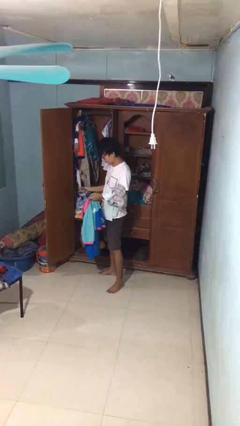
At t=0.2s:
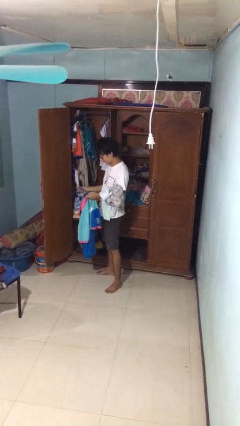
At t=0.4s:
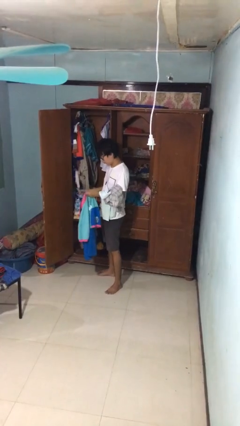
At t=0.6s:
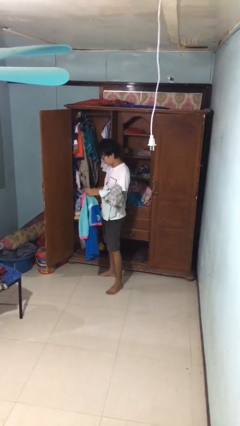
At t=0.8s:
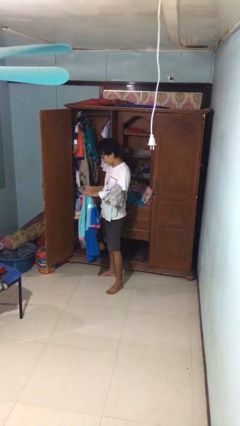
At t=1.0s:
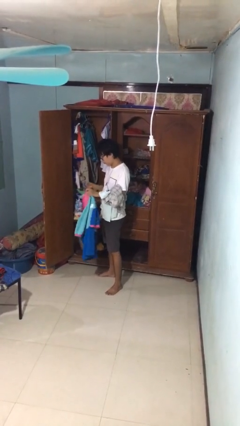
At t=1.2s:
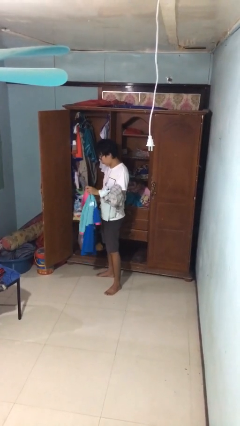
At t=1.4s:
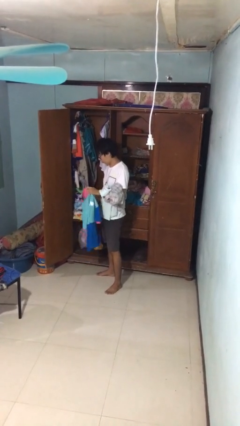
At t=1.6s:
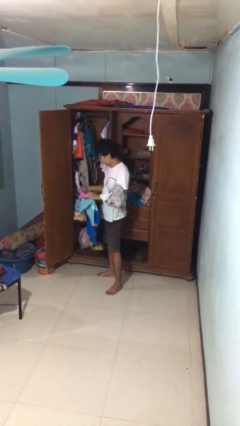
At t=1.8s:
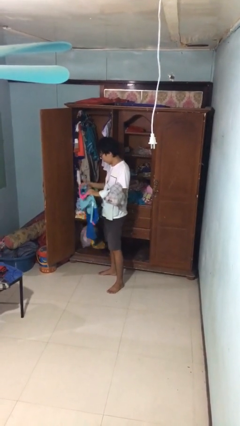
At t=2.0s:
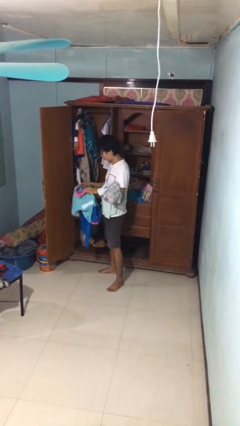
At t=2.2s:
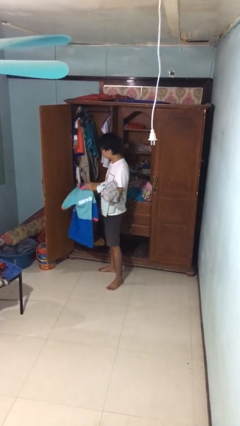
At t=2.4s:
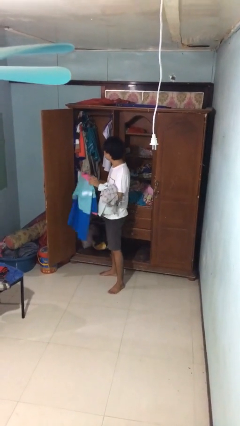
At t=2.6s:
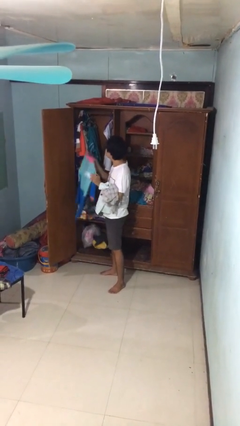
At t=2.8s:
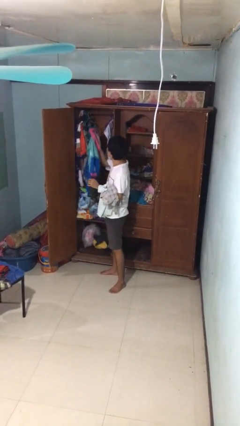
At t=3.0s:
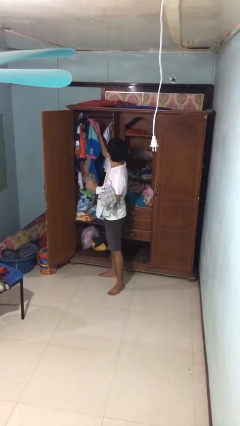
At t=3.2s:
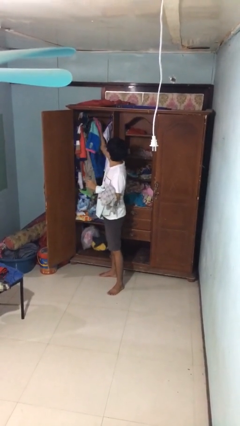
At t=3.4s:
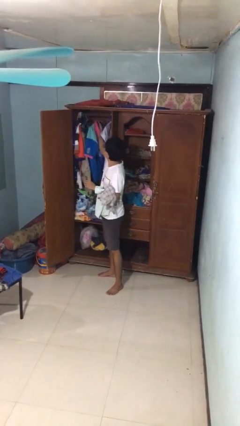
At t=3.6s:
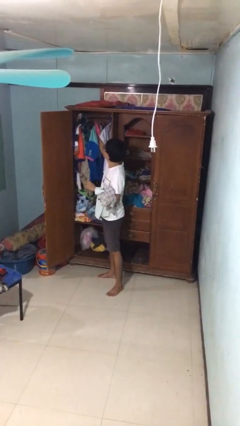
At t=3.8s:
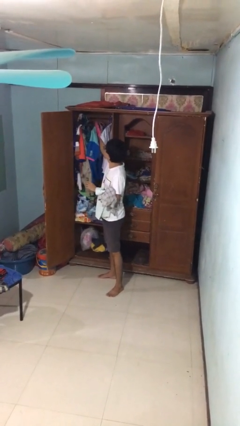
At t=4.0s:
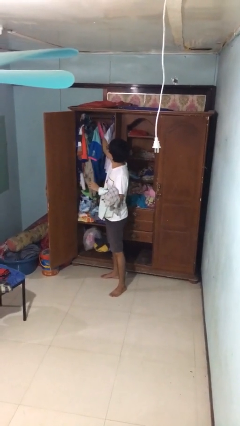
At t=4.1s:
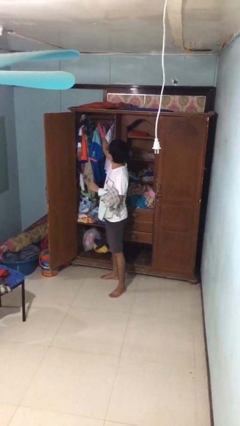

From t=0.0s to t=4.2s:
person puts clothes into closet

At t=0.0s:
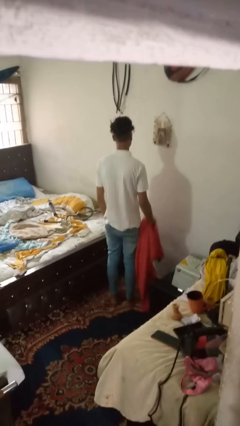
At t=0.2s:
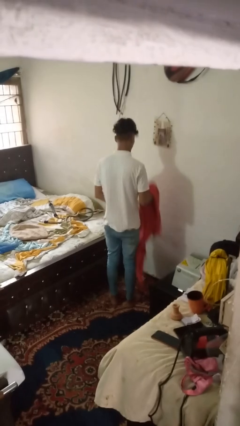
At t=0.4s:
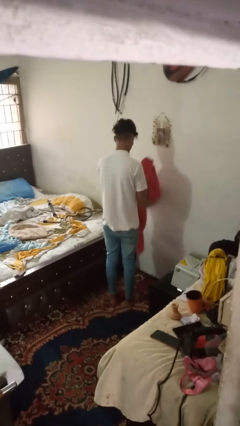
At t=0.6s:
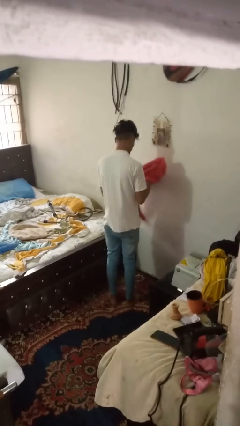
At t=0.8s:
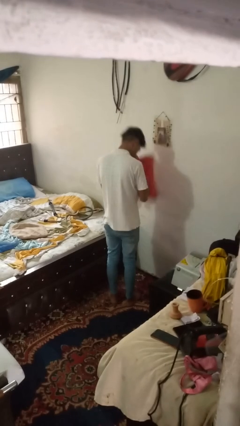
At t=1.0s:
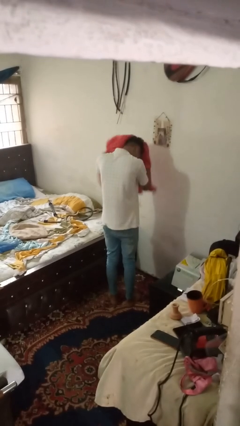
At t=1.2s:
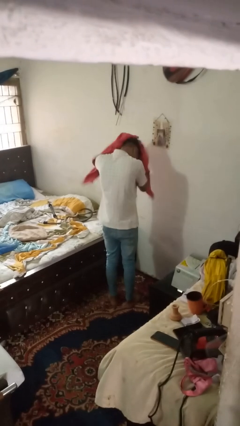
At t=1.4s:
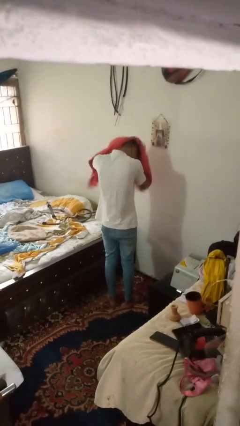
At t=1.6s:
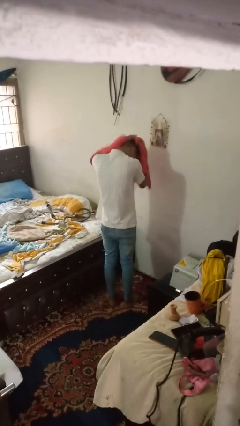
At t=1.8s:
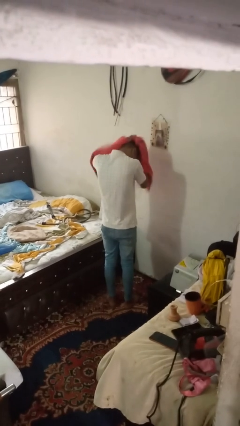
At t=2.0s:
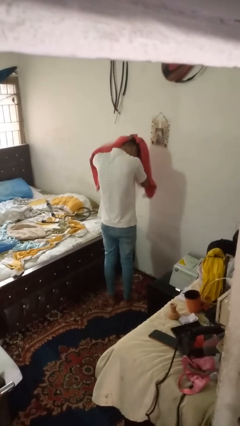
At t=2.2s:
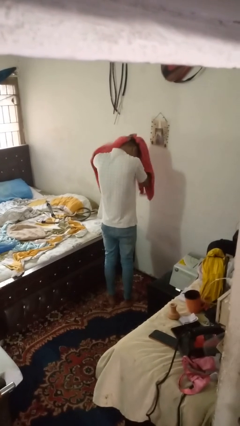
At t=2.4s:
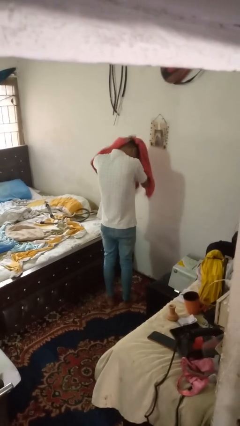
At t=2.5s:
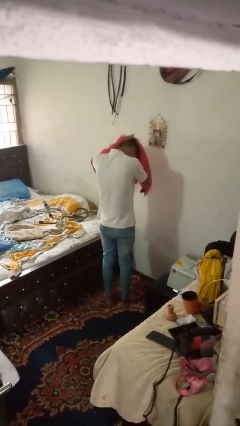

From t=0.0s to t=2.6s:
person dries hair with towel

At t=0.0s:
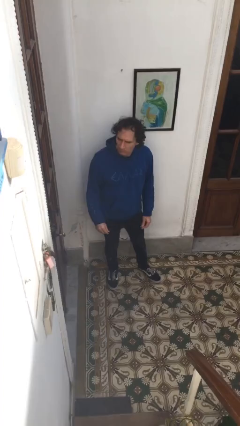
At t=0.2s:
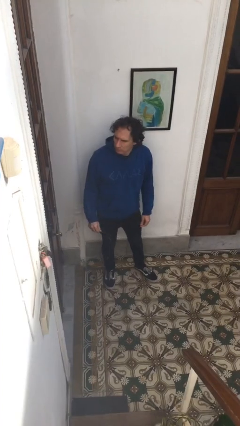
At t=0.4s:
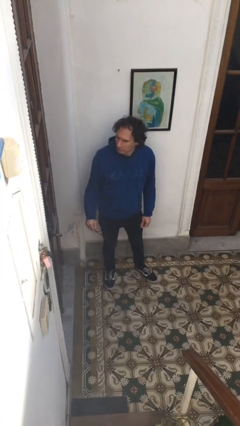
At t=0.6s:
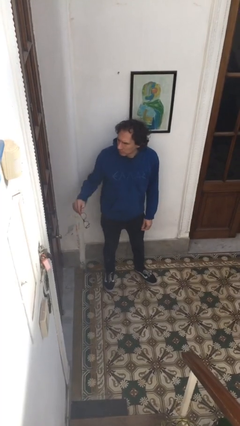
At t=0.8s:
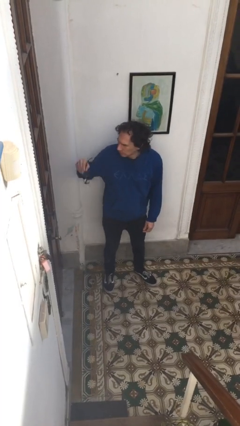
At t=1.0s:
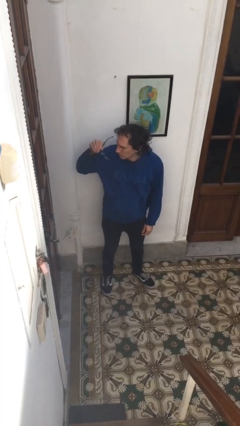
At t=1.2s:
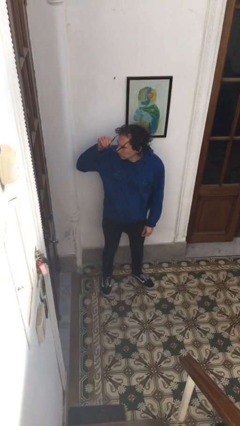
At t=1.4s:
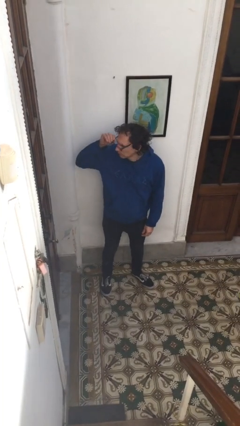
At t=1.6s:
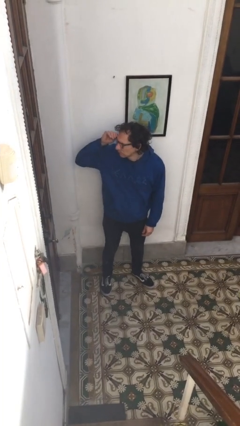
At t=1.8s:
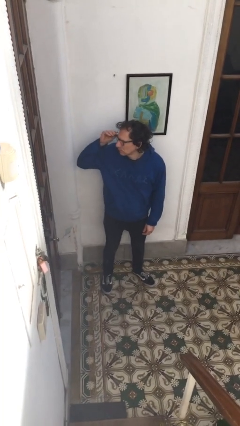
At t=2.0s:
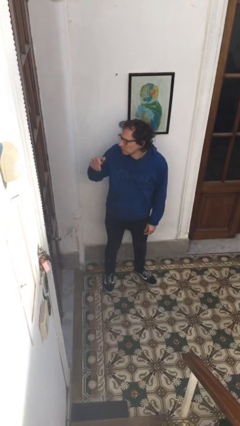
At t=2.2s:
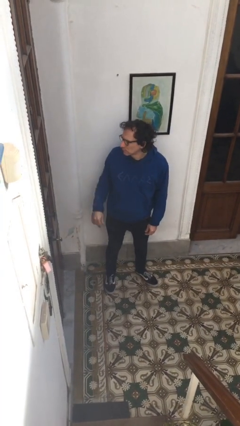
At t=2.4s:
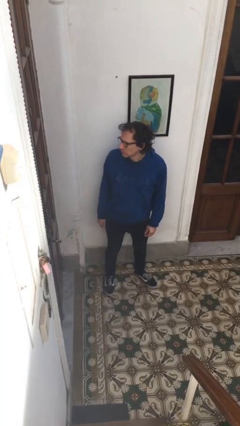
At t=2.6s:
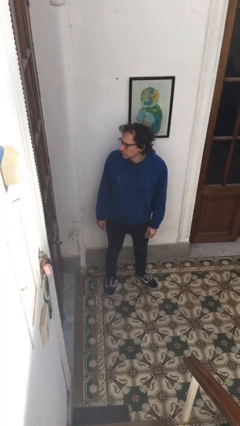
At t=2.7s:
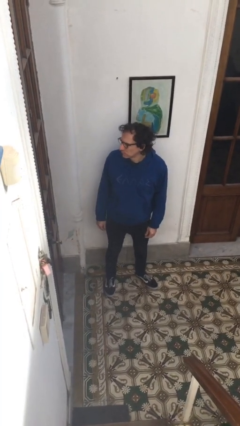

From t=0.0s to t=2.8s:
person puts on glasses

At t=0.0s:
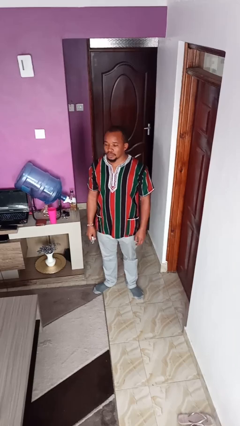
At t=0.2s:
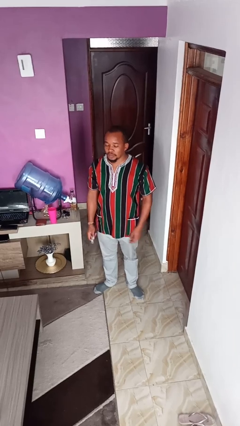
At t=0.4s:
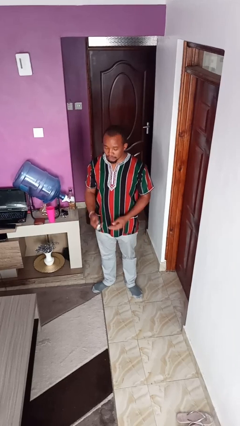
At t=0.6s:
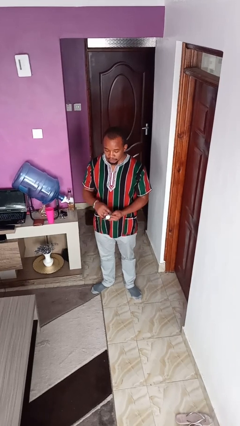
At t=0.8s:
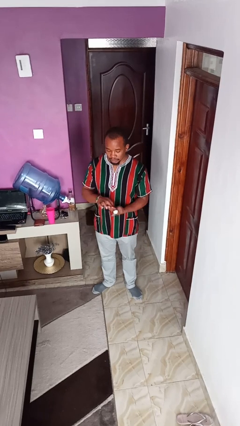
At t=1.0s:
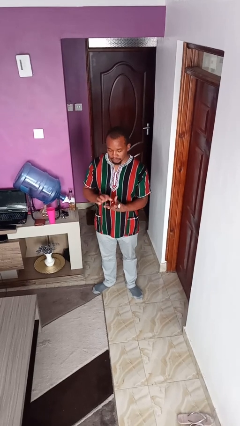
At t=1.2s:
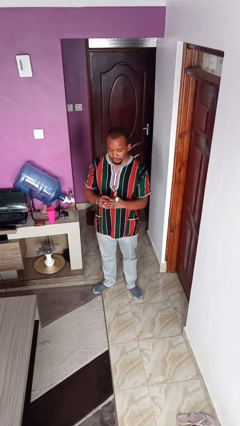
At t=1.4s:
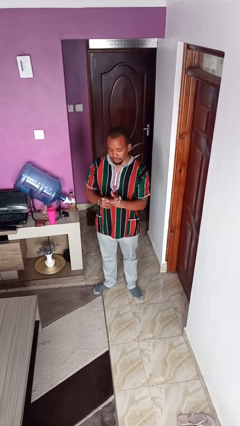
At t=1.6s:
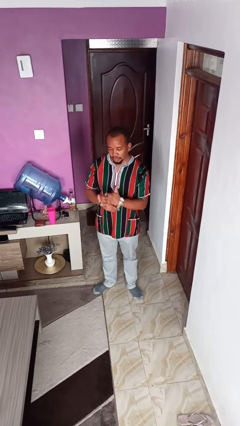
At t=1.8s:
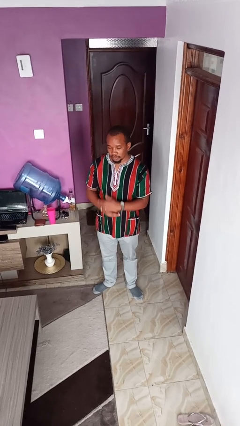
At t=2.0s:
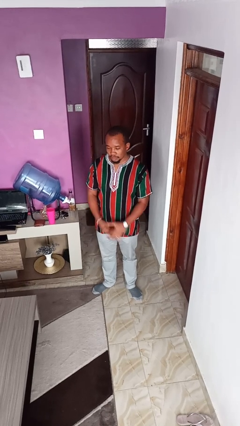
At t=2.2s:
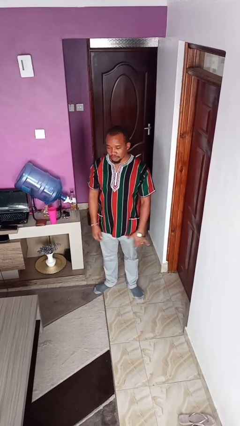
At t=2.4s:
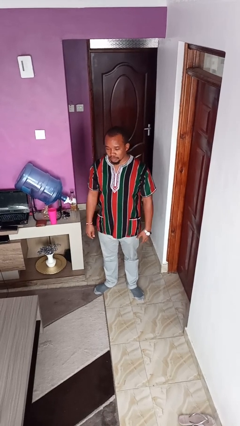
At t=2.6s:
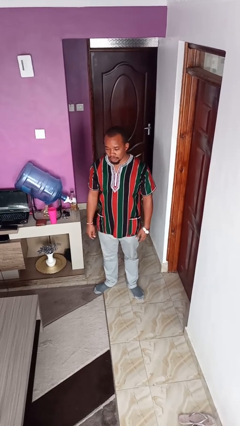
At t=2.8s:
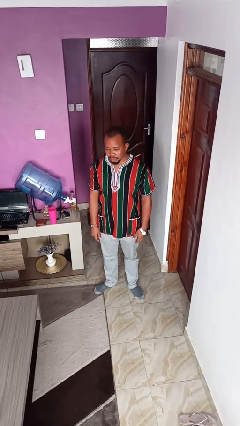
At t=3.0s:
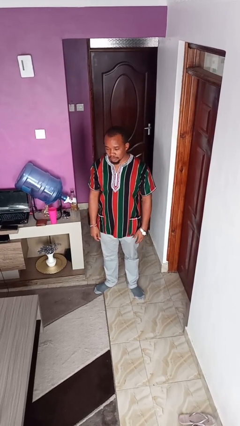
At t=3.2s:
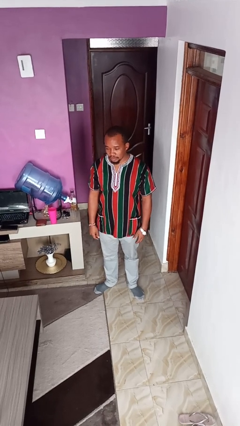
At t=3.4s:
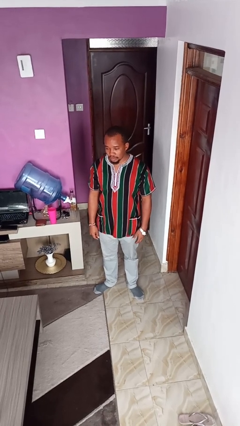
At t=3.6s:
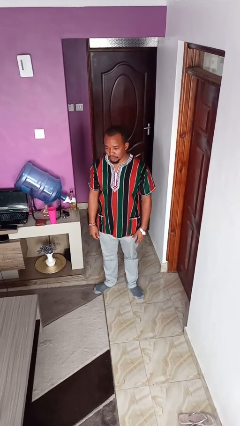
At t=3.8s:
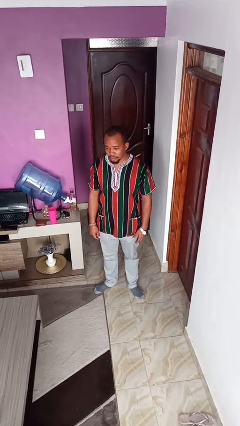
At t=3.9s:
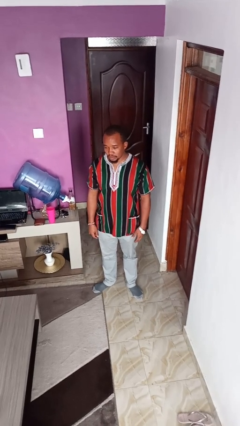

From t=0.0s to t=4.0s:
person puts on wristwatch

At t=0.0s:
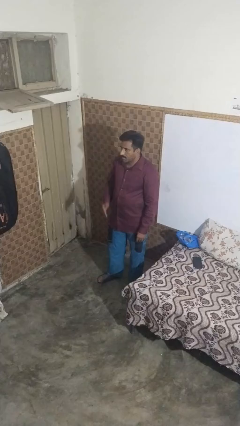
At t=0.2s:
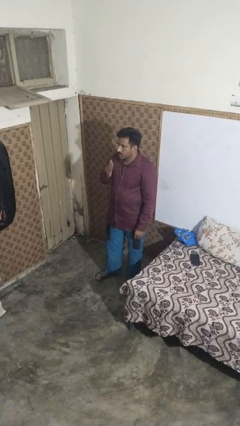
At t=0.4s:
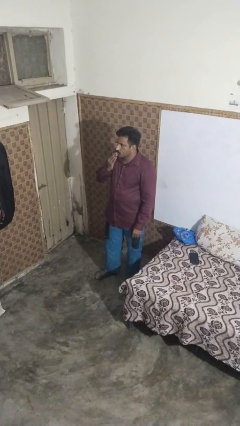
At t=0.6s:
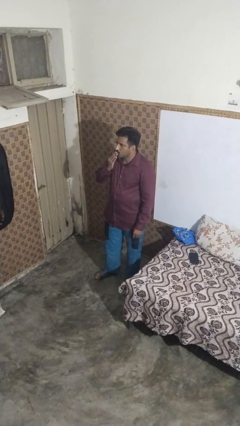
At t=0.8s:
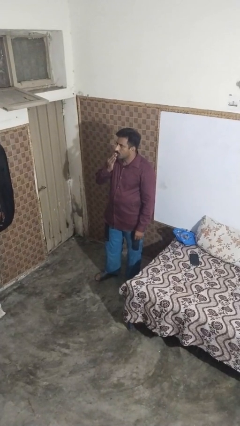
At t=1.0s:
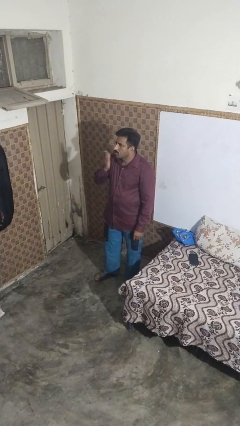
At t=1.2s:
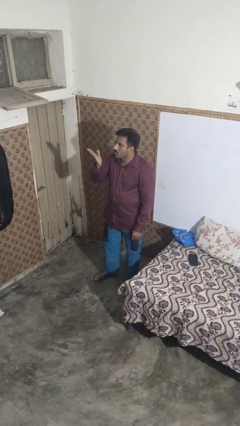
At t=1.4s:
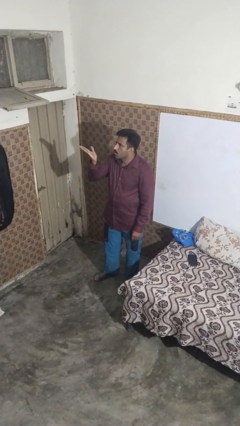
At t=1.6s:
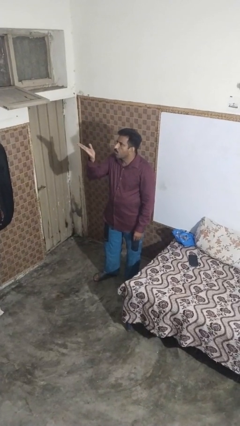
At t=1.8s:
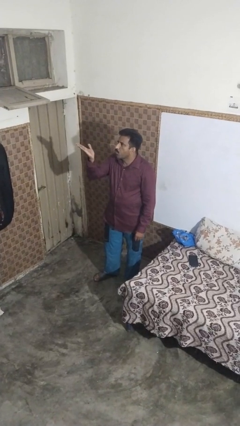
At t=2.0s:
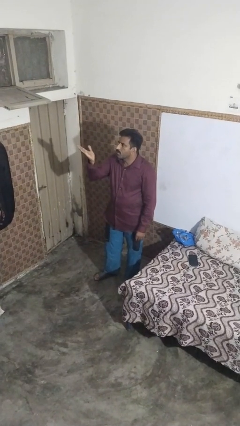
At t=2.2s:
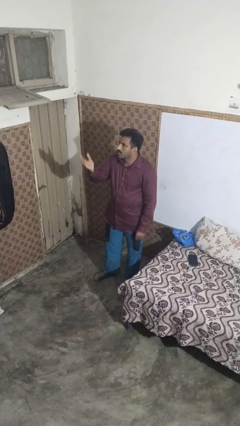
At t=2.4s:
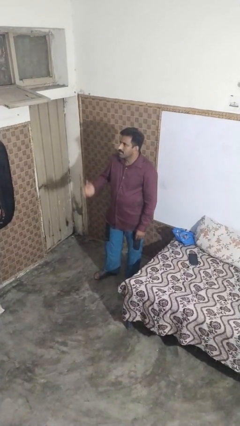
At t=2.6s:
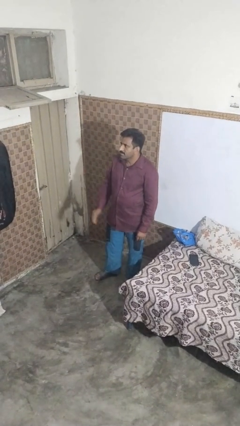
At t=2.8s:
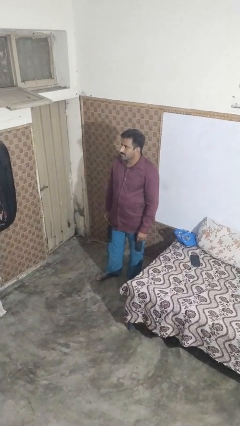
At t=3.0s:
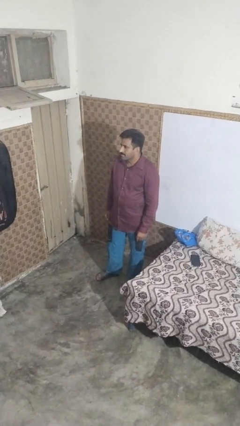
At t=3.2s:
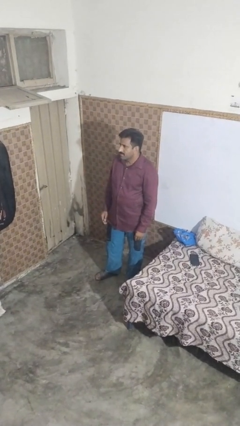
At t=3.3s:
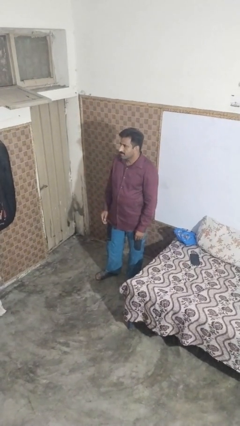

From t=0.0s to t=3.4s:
person gestures blow kiss

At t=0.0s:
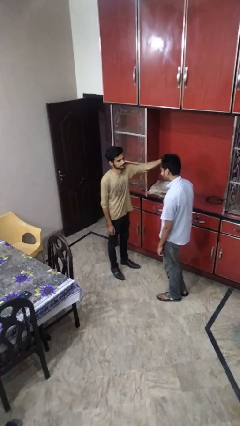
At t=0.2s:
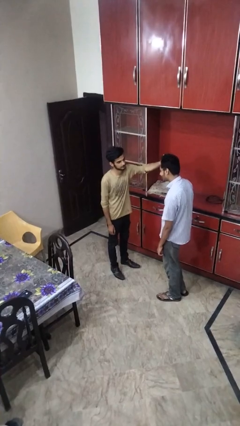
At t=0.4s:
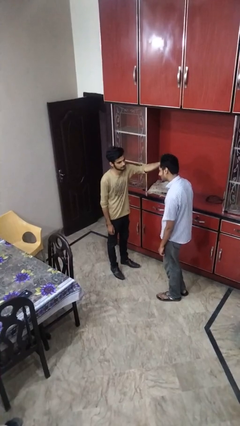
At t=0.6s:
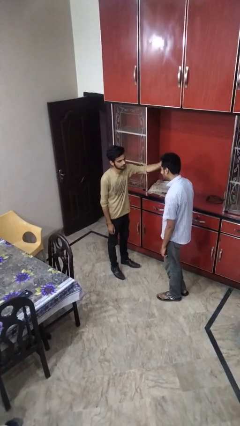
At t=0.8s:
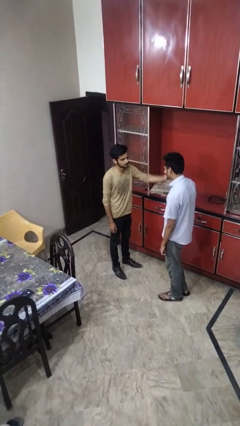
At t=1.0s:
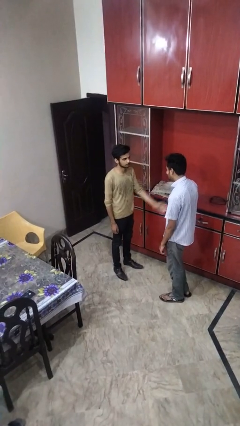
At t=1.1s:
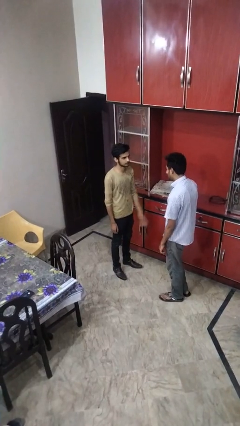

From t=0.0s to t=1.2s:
person grabs person by hair
